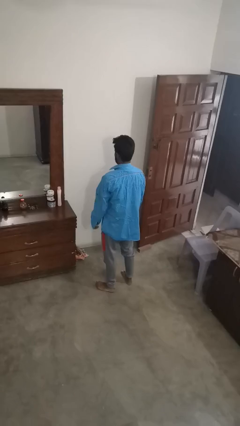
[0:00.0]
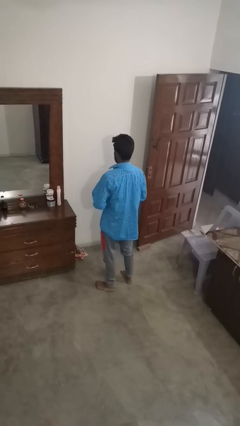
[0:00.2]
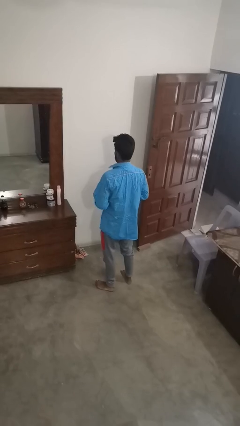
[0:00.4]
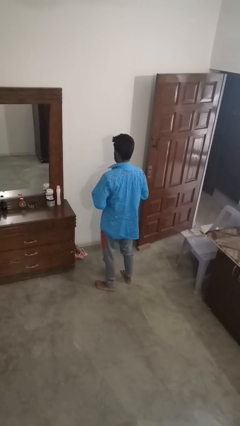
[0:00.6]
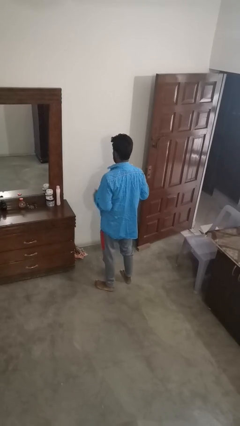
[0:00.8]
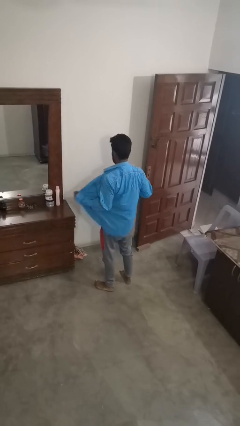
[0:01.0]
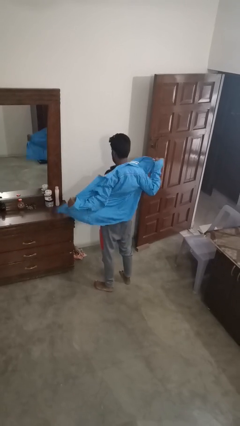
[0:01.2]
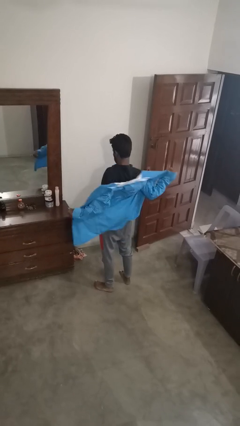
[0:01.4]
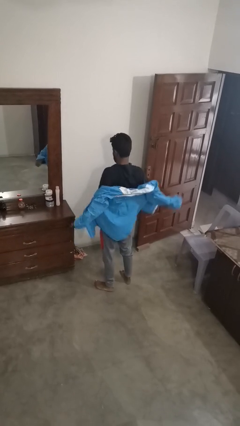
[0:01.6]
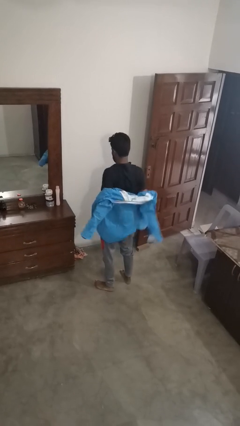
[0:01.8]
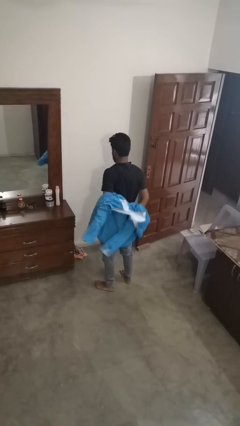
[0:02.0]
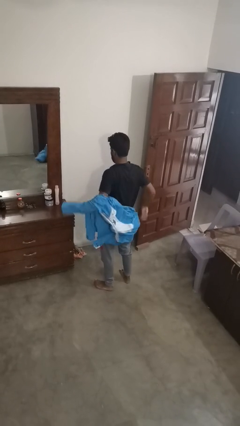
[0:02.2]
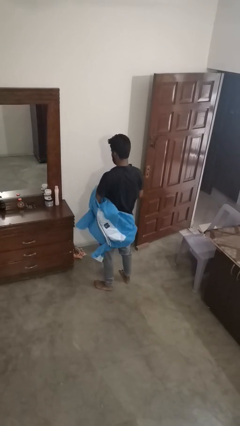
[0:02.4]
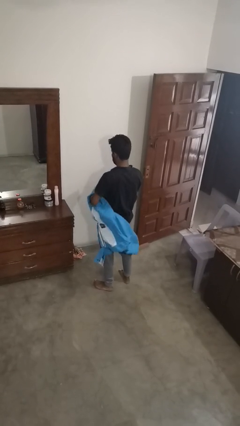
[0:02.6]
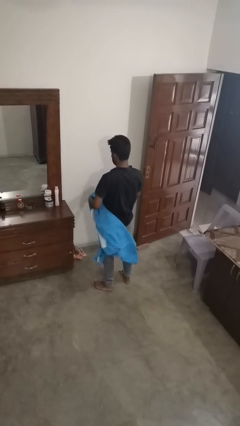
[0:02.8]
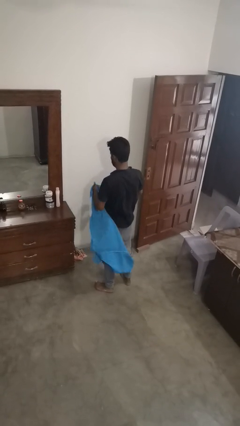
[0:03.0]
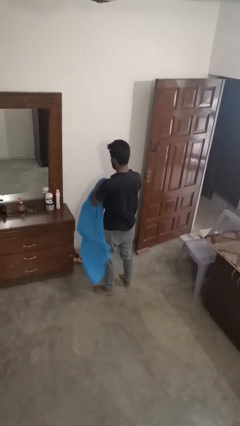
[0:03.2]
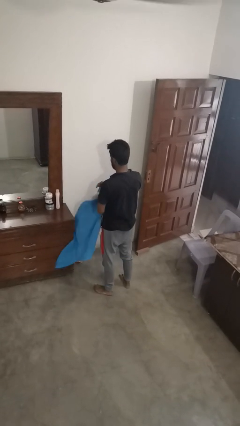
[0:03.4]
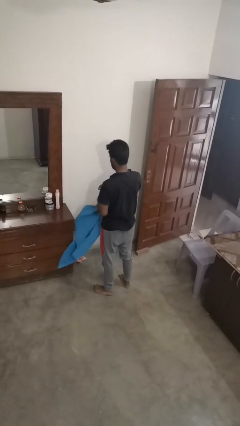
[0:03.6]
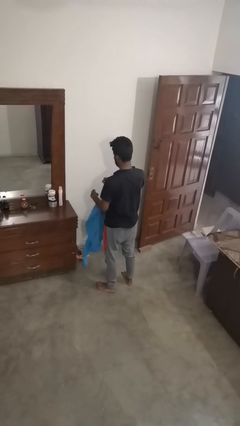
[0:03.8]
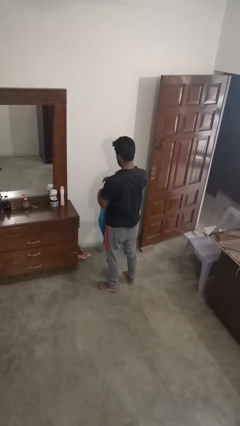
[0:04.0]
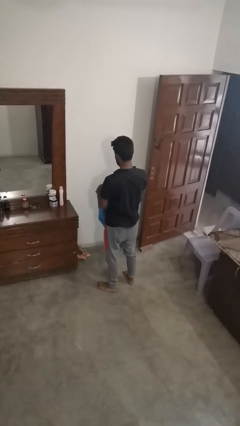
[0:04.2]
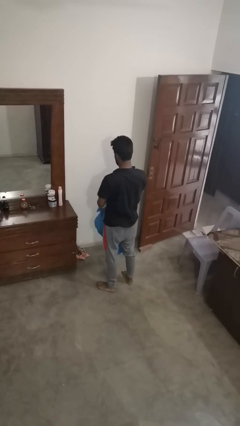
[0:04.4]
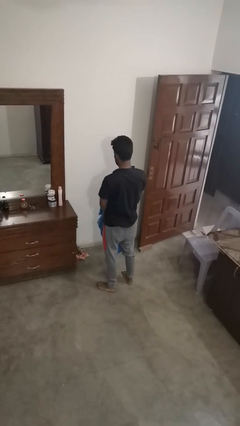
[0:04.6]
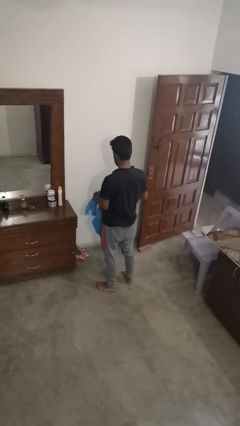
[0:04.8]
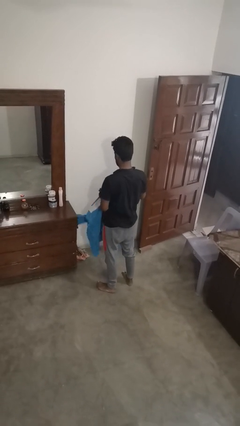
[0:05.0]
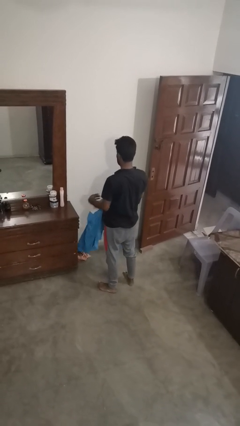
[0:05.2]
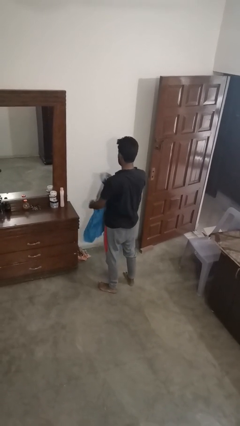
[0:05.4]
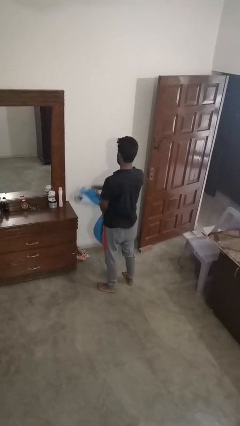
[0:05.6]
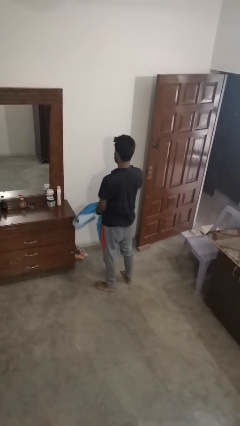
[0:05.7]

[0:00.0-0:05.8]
person takes off shirt
